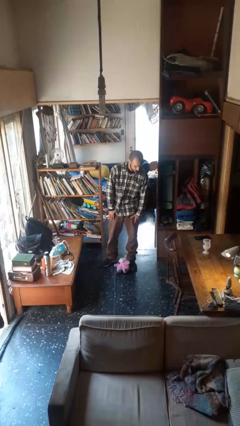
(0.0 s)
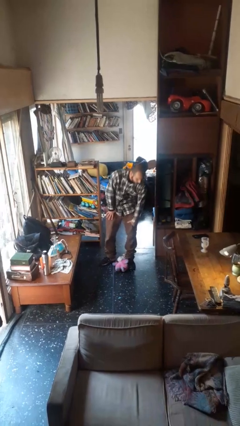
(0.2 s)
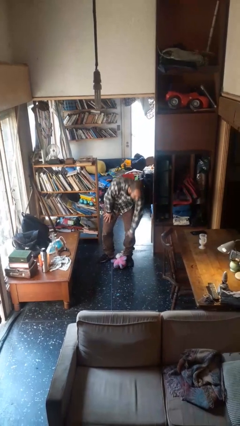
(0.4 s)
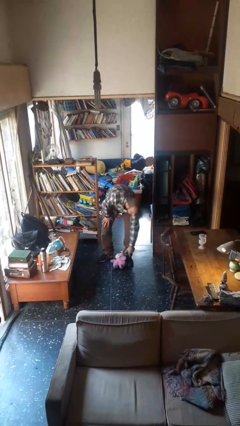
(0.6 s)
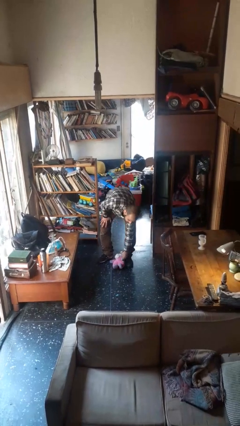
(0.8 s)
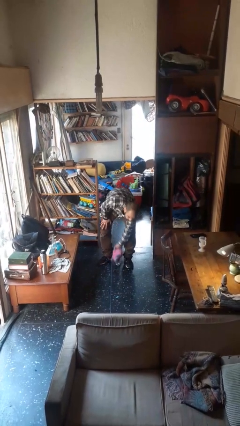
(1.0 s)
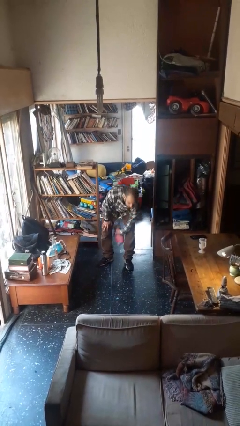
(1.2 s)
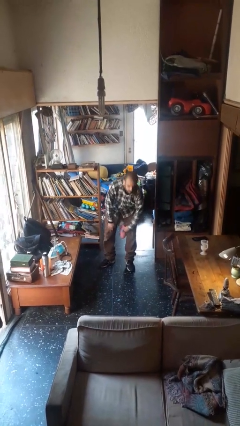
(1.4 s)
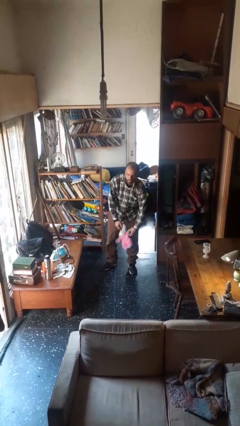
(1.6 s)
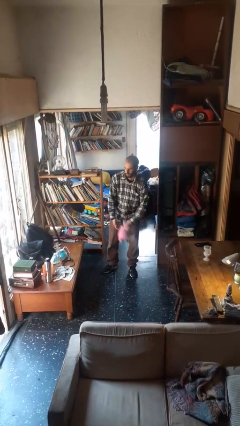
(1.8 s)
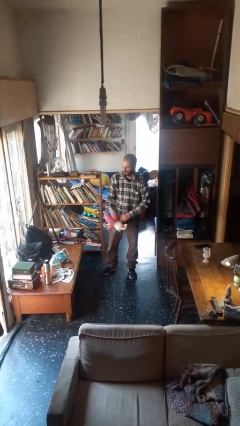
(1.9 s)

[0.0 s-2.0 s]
person picks up object from floor

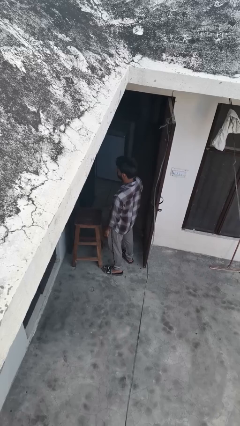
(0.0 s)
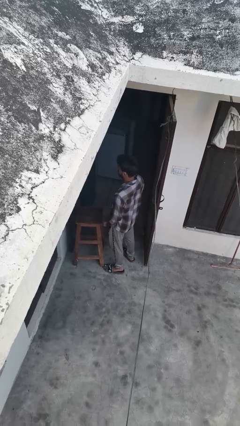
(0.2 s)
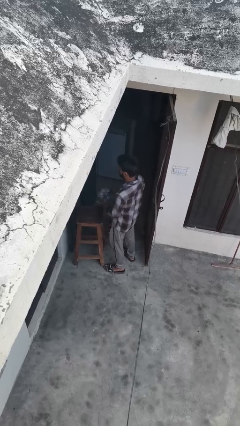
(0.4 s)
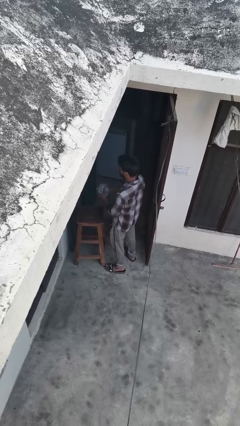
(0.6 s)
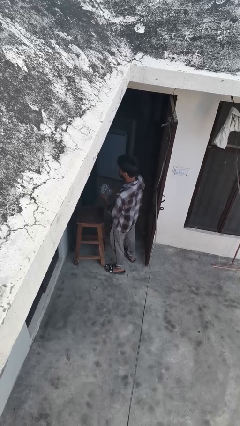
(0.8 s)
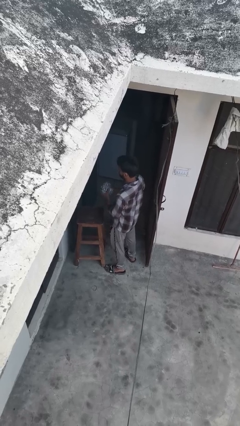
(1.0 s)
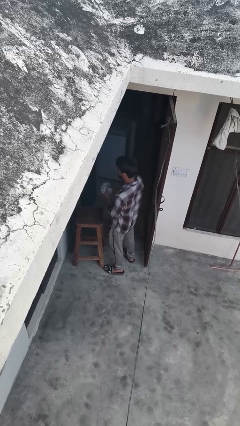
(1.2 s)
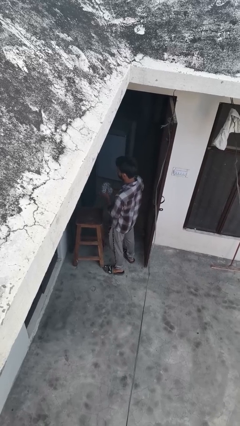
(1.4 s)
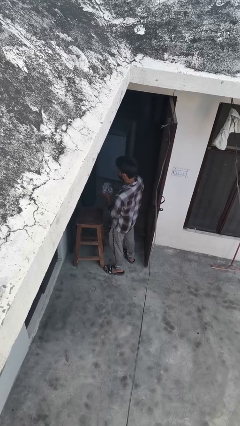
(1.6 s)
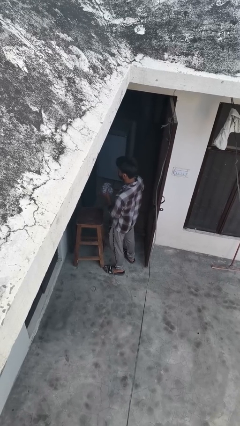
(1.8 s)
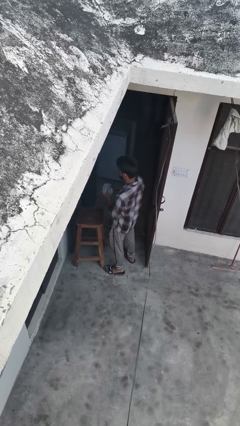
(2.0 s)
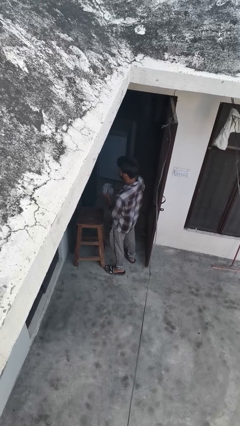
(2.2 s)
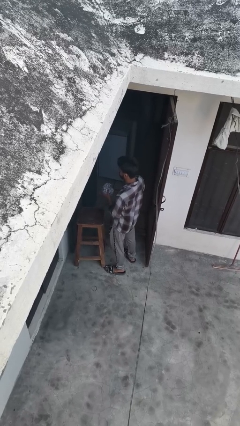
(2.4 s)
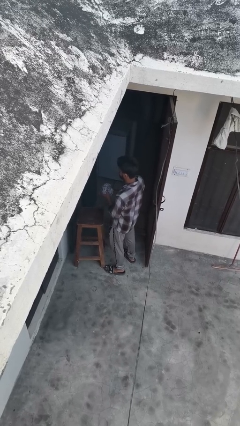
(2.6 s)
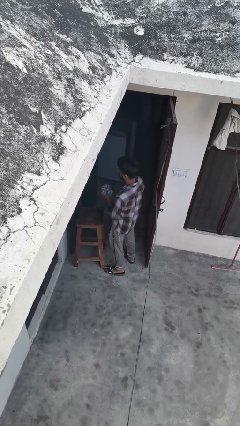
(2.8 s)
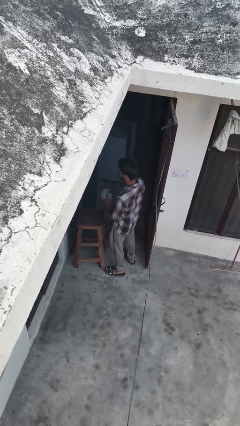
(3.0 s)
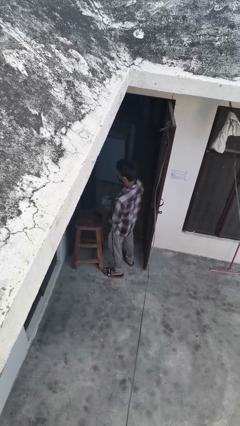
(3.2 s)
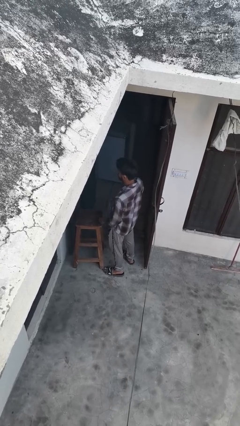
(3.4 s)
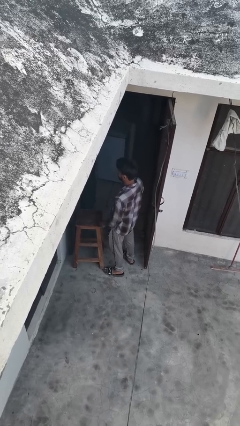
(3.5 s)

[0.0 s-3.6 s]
person squeezes object

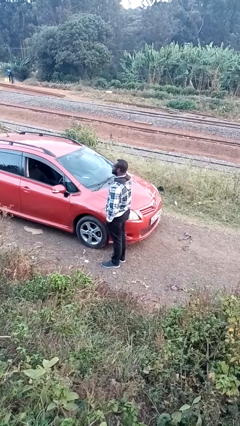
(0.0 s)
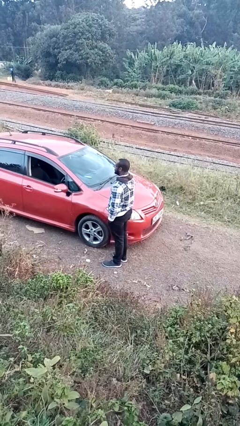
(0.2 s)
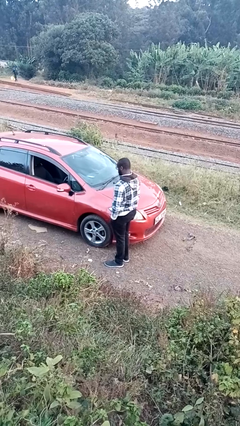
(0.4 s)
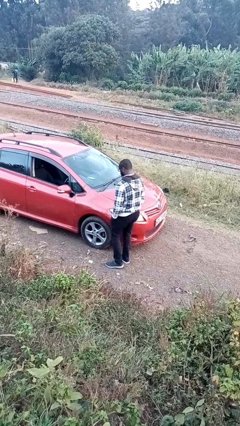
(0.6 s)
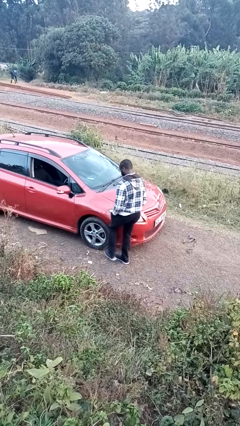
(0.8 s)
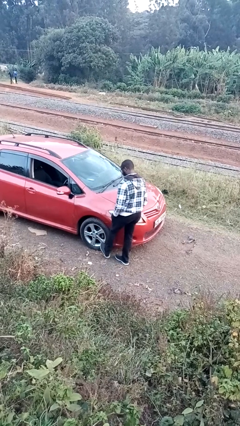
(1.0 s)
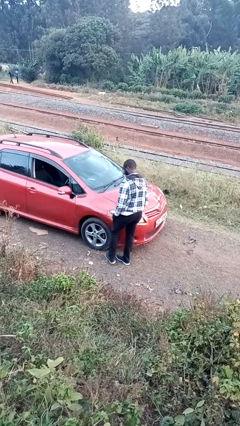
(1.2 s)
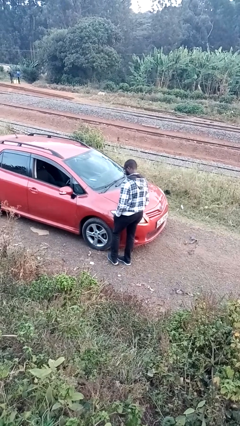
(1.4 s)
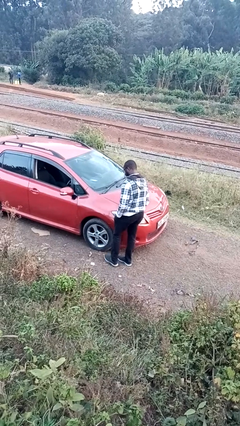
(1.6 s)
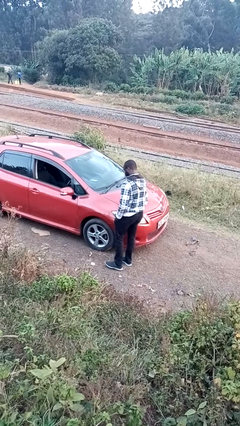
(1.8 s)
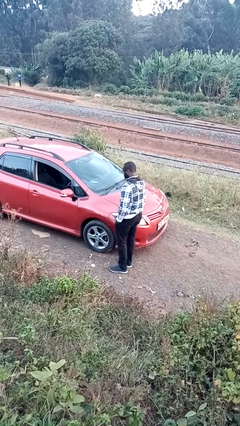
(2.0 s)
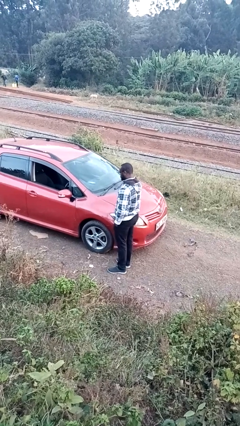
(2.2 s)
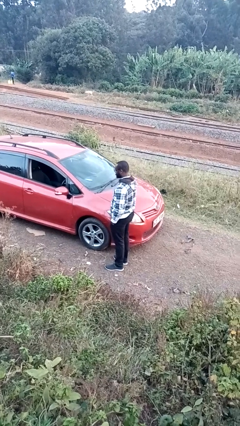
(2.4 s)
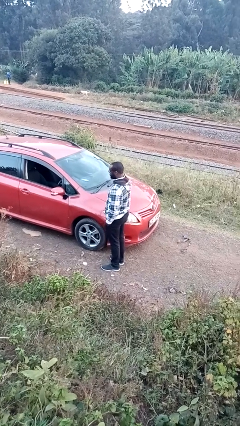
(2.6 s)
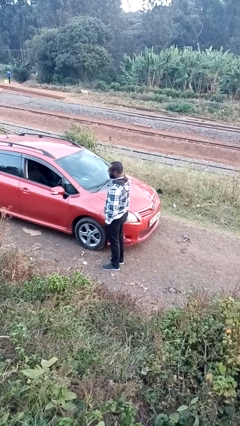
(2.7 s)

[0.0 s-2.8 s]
person kicks car tires

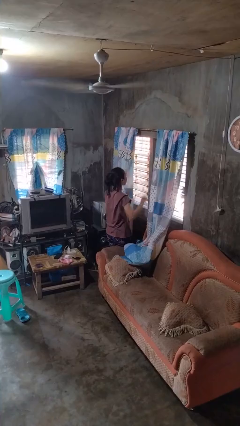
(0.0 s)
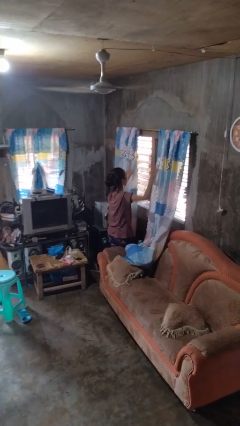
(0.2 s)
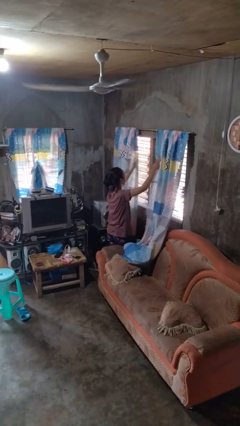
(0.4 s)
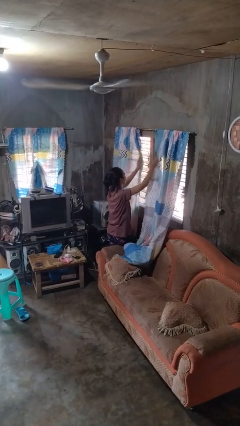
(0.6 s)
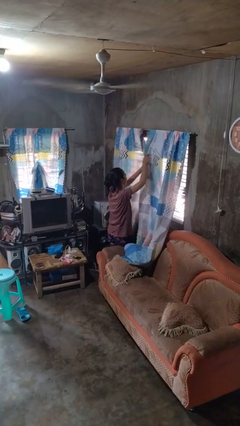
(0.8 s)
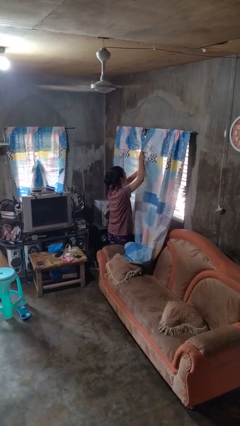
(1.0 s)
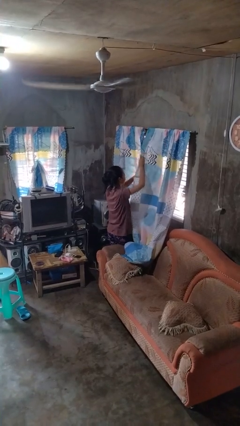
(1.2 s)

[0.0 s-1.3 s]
person closes curtains

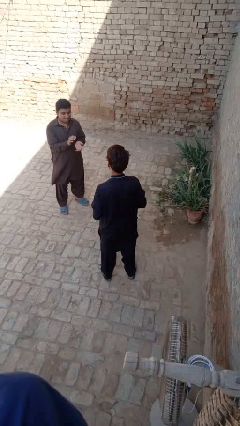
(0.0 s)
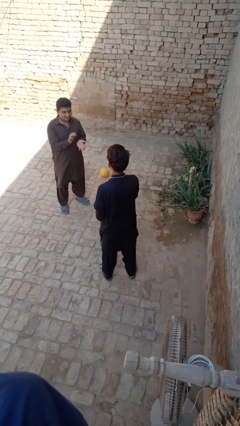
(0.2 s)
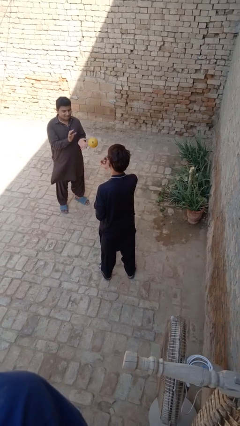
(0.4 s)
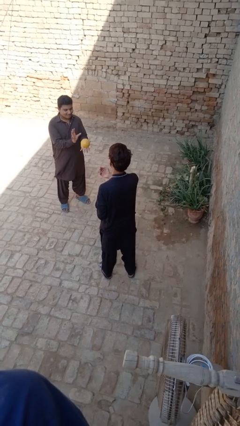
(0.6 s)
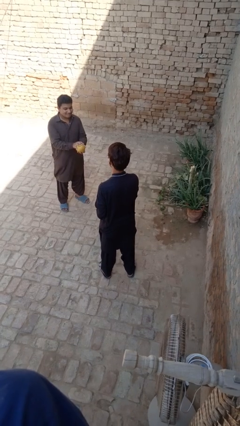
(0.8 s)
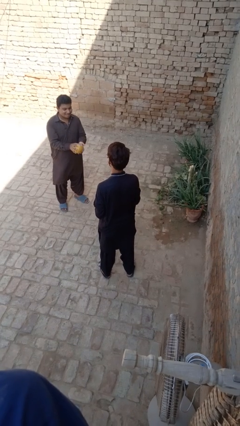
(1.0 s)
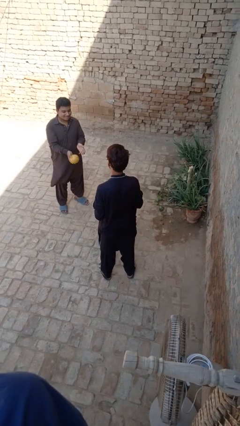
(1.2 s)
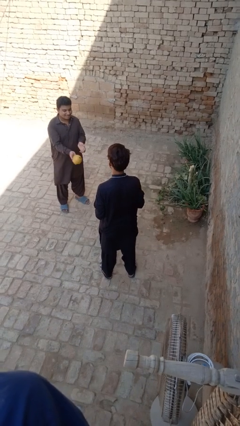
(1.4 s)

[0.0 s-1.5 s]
person throws object to person

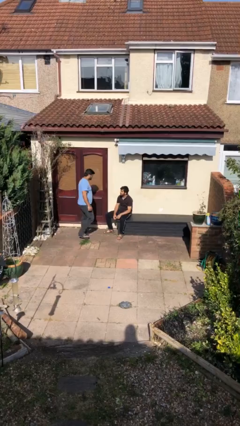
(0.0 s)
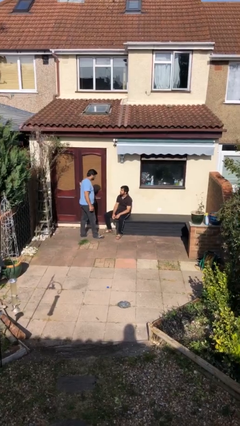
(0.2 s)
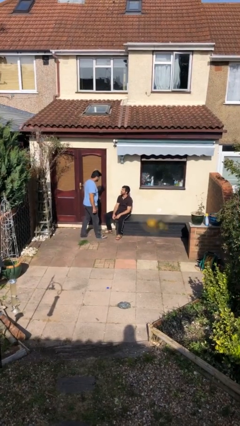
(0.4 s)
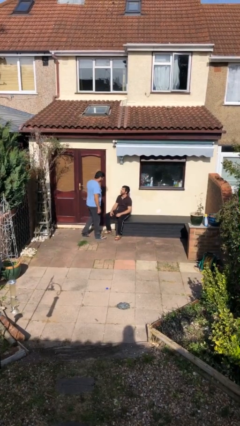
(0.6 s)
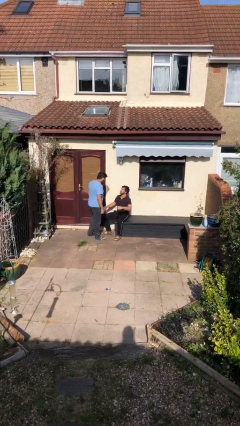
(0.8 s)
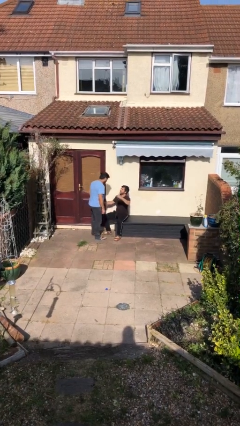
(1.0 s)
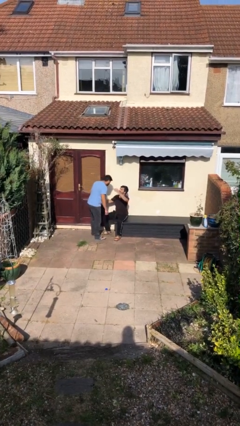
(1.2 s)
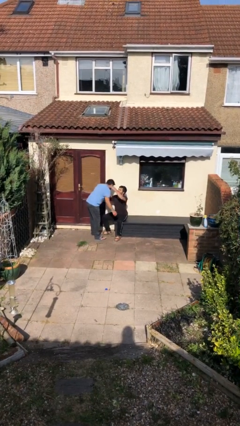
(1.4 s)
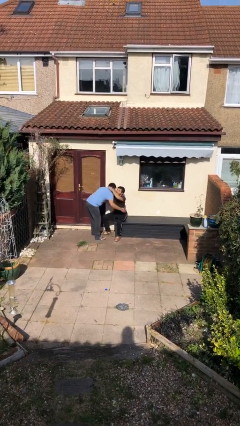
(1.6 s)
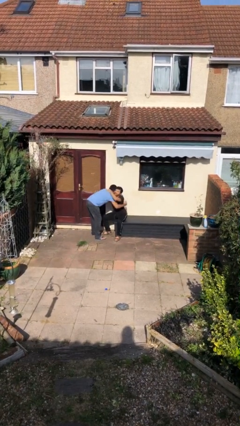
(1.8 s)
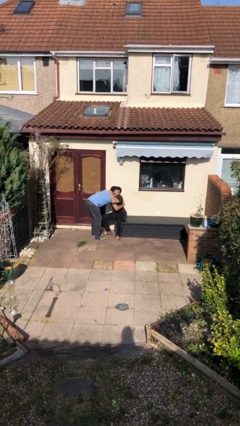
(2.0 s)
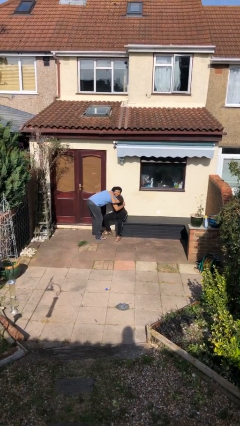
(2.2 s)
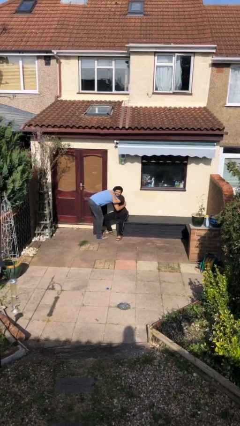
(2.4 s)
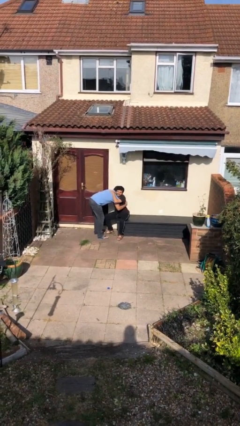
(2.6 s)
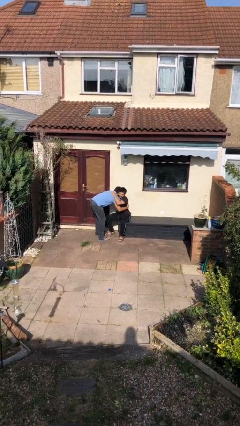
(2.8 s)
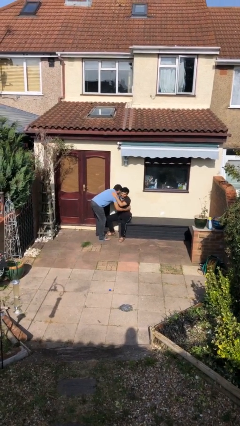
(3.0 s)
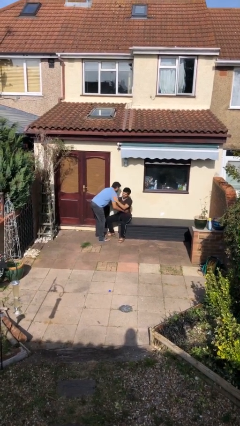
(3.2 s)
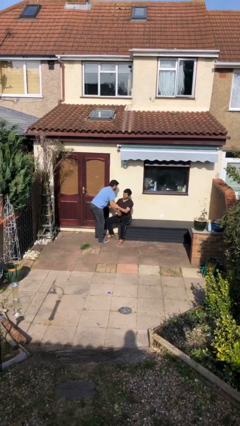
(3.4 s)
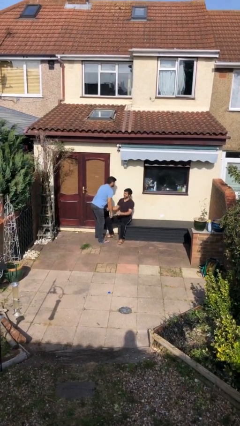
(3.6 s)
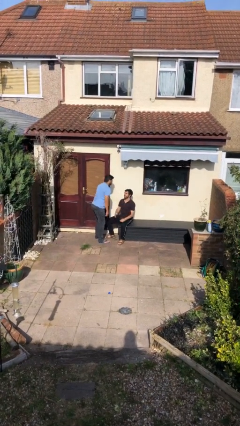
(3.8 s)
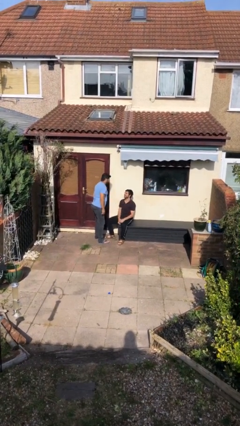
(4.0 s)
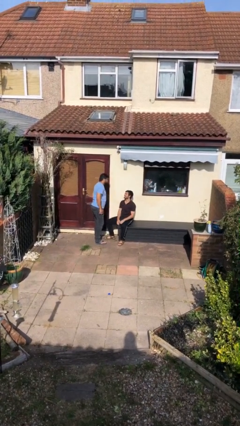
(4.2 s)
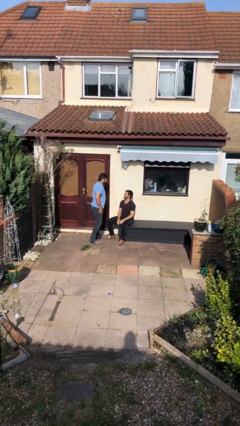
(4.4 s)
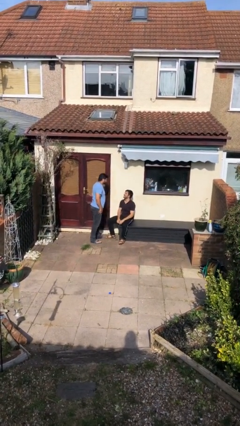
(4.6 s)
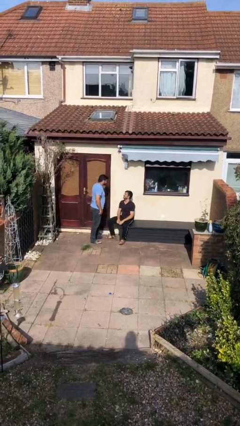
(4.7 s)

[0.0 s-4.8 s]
person embraces person

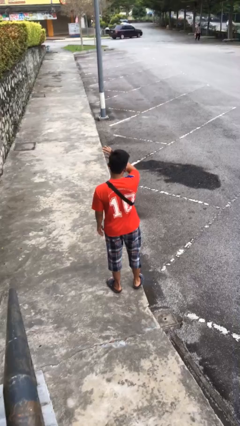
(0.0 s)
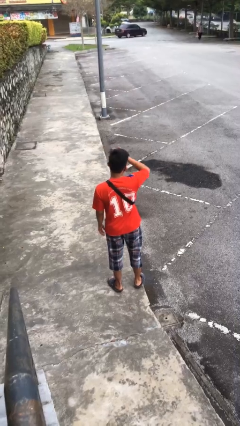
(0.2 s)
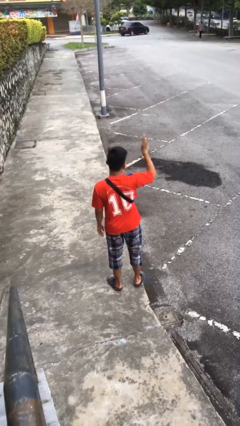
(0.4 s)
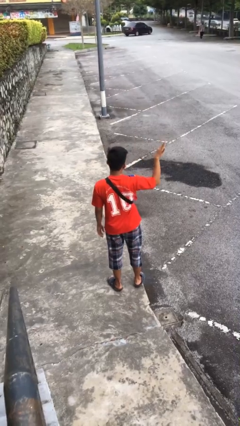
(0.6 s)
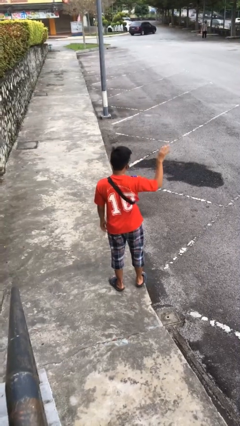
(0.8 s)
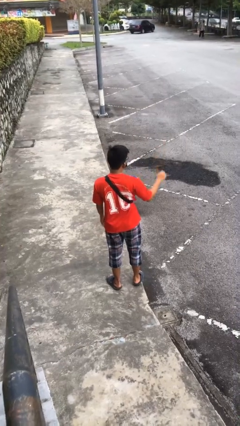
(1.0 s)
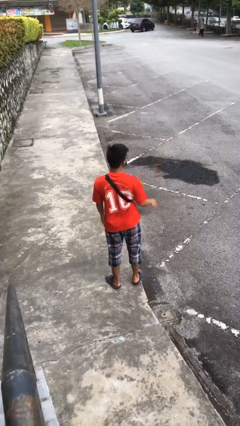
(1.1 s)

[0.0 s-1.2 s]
person gestures swipe right

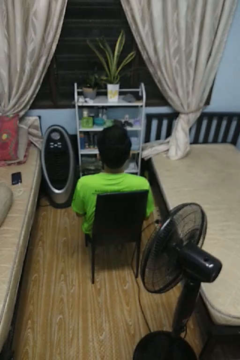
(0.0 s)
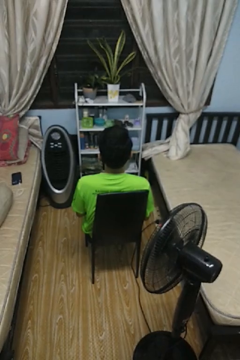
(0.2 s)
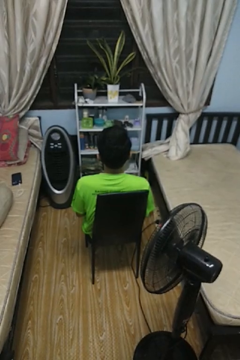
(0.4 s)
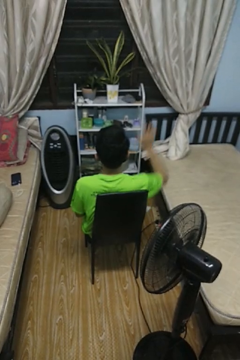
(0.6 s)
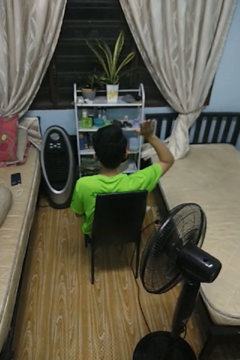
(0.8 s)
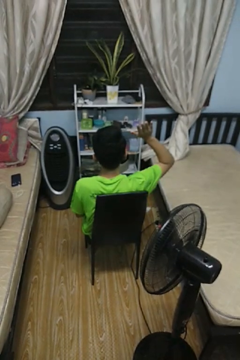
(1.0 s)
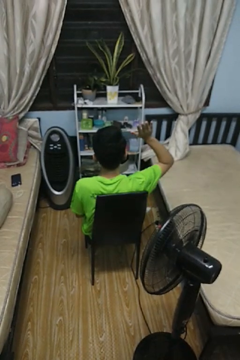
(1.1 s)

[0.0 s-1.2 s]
person gestures number five
